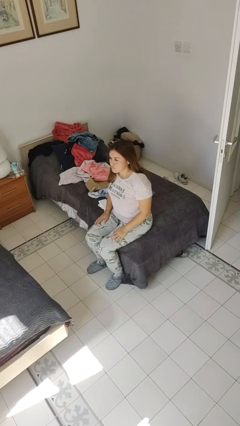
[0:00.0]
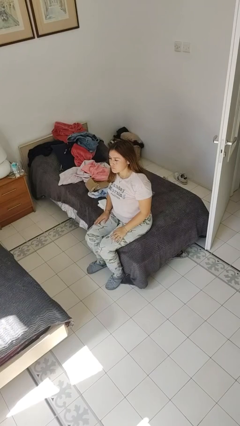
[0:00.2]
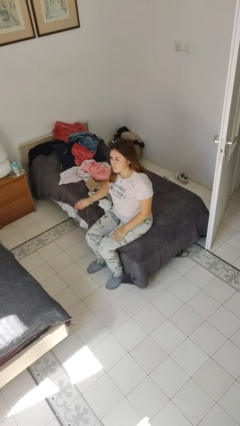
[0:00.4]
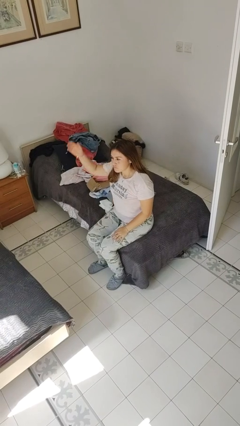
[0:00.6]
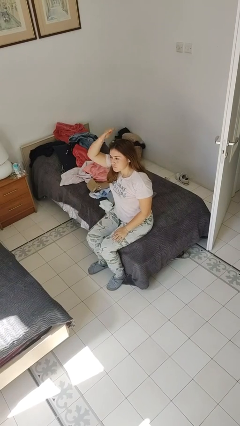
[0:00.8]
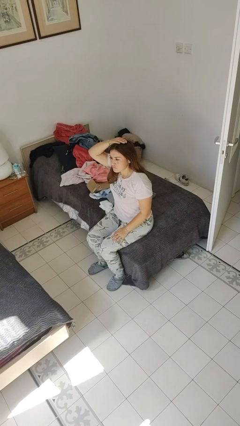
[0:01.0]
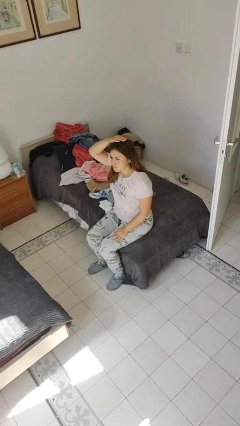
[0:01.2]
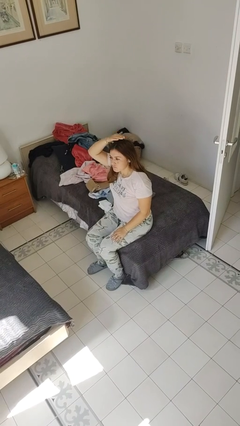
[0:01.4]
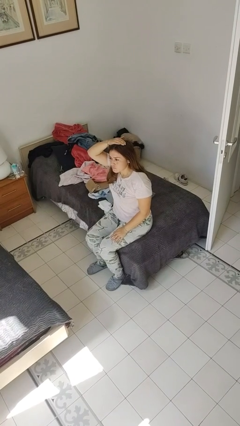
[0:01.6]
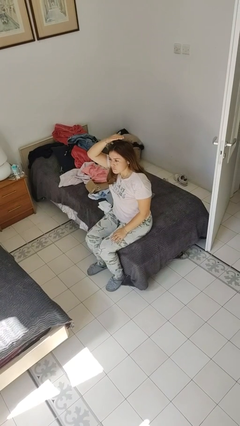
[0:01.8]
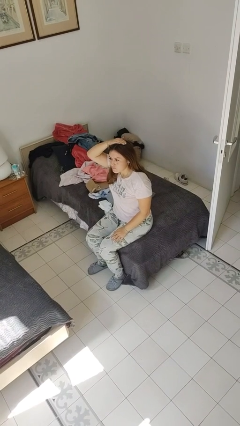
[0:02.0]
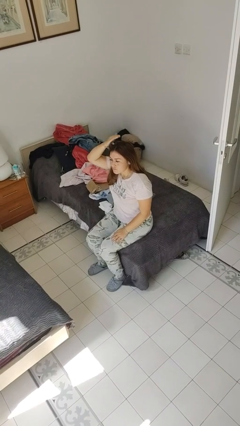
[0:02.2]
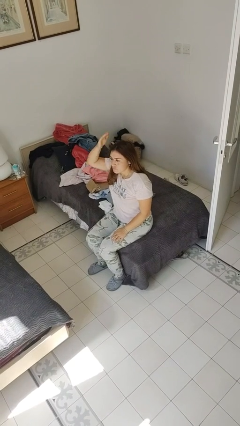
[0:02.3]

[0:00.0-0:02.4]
person pats head

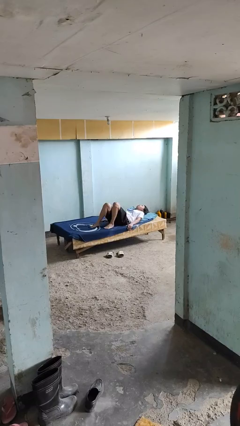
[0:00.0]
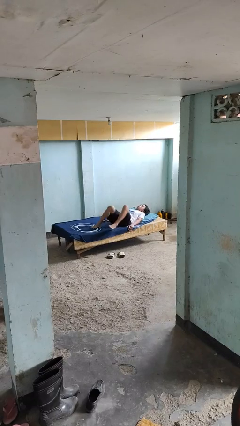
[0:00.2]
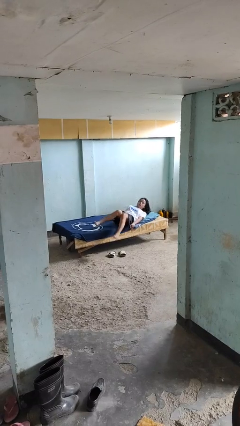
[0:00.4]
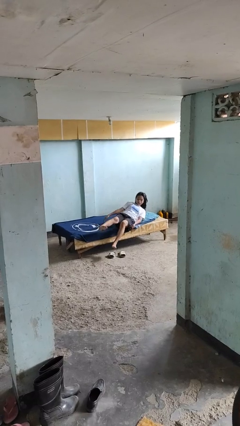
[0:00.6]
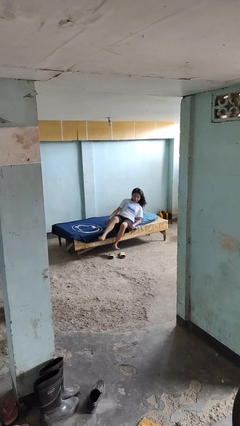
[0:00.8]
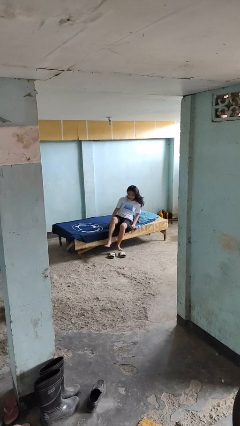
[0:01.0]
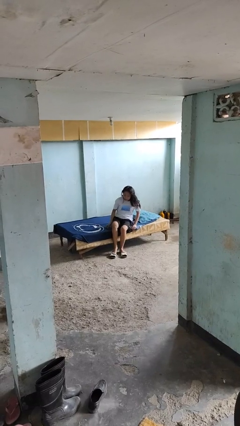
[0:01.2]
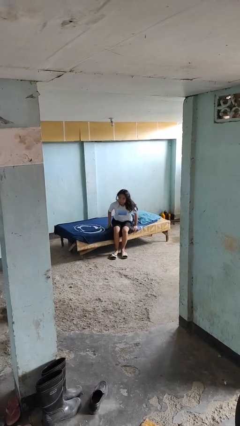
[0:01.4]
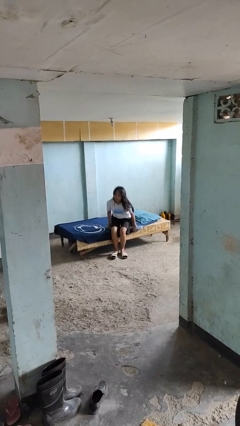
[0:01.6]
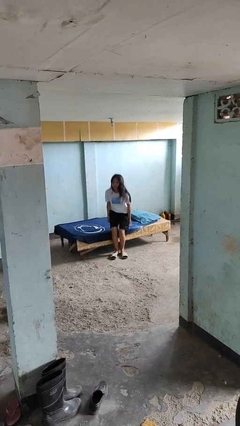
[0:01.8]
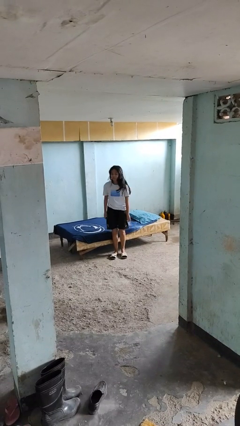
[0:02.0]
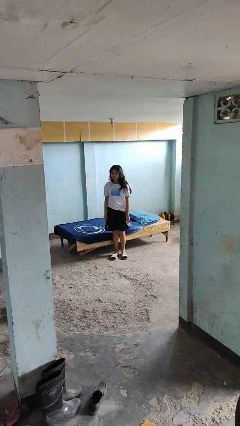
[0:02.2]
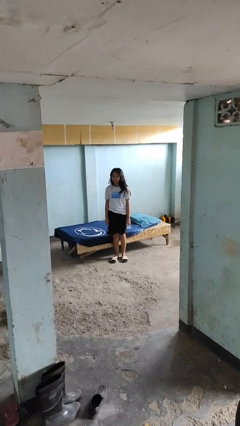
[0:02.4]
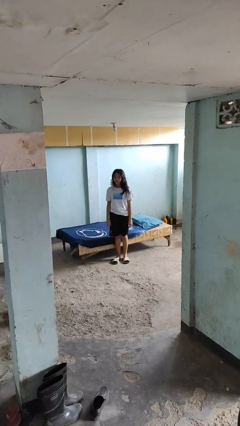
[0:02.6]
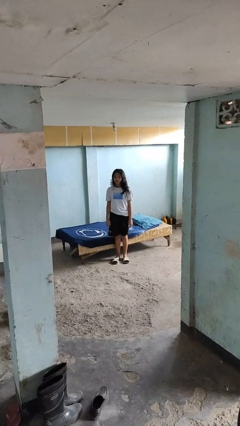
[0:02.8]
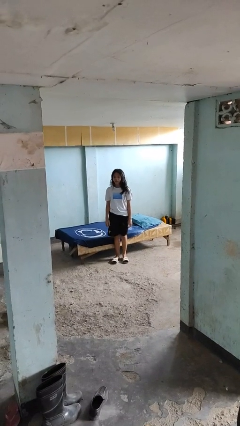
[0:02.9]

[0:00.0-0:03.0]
person stands up

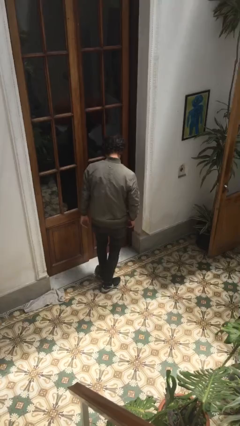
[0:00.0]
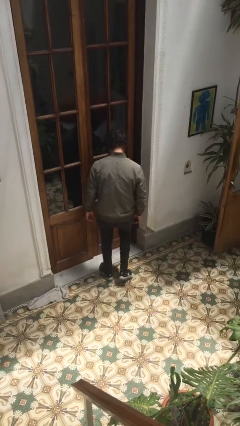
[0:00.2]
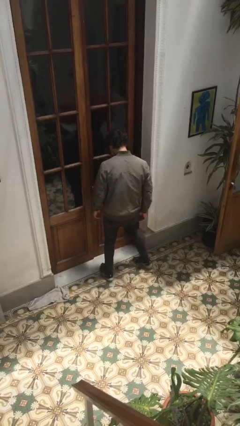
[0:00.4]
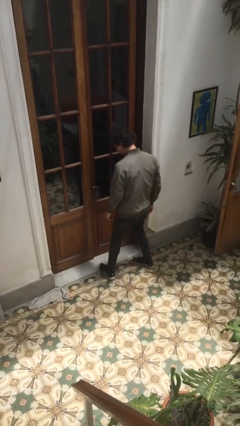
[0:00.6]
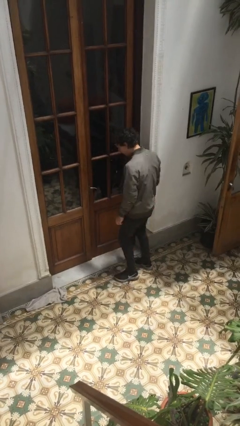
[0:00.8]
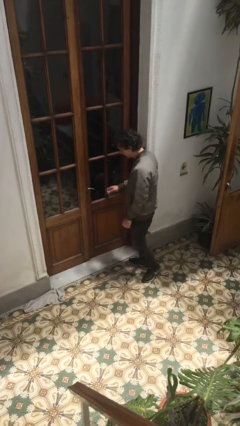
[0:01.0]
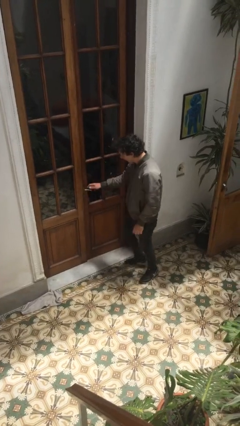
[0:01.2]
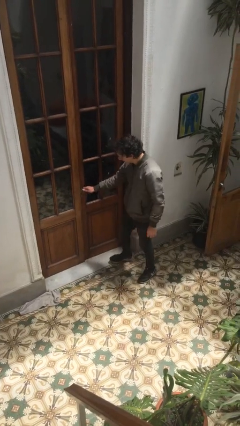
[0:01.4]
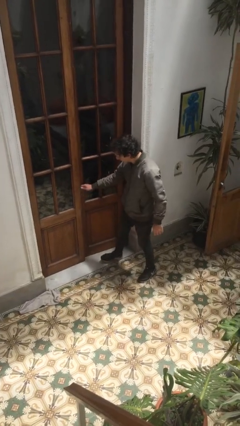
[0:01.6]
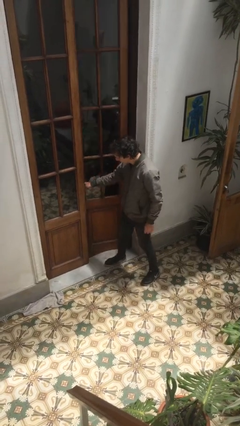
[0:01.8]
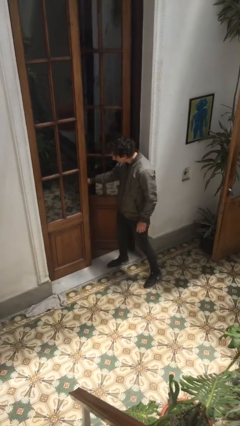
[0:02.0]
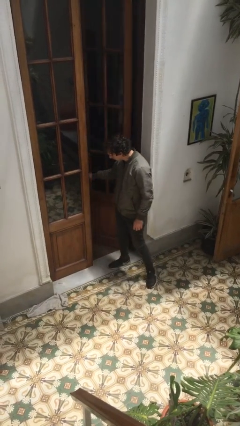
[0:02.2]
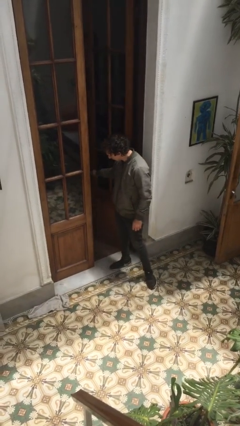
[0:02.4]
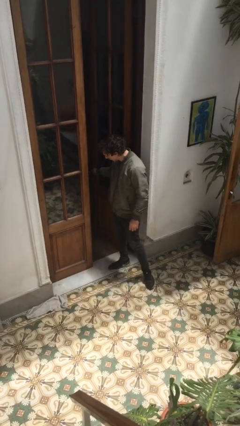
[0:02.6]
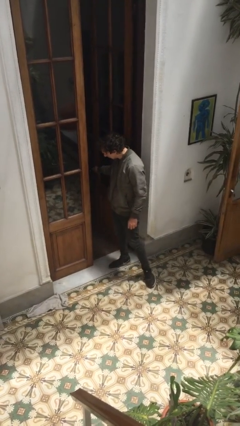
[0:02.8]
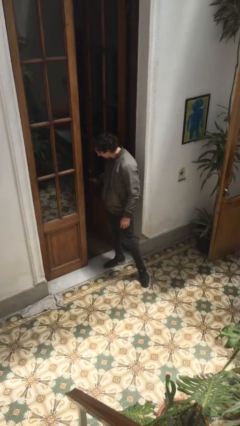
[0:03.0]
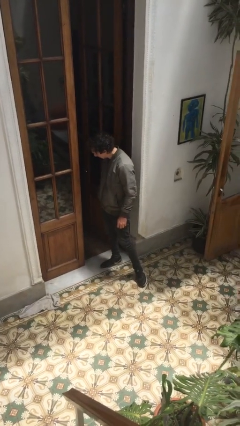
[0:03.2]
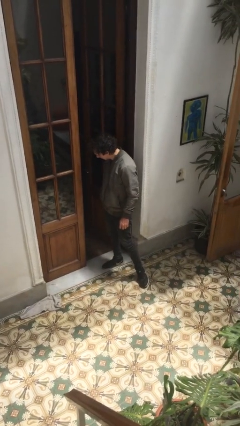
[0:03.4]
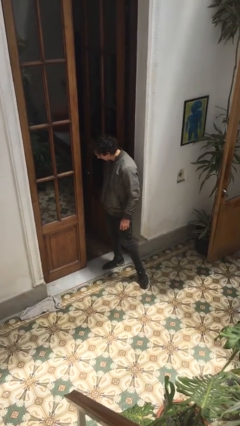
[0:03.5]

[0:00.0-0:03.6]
person opens facility door

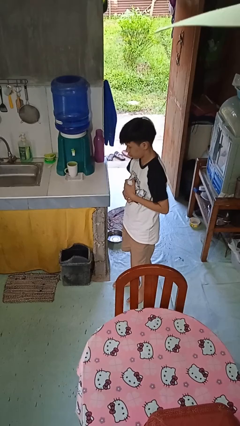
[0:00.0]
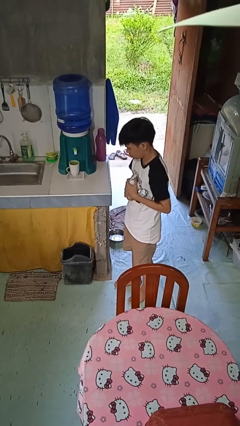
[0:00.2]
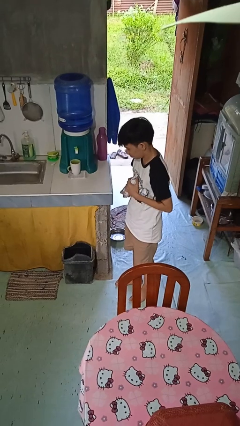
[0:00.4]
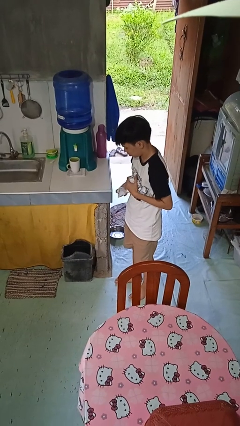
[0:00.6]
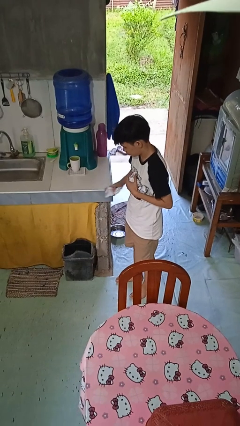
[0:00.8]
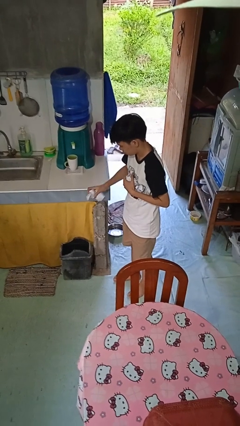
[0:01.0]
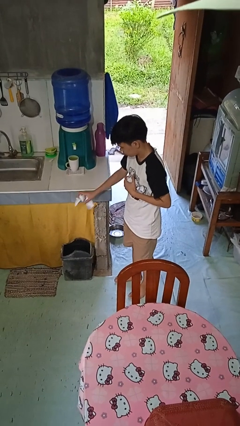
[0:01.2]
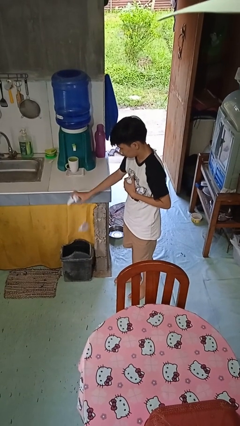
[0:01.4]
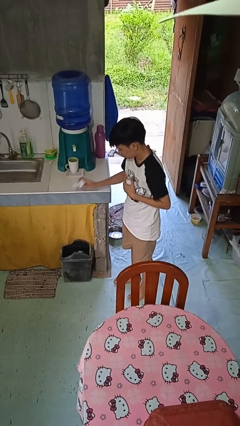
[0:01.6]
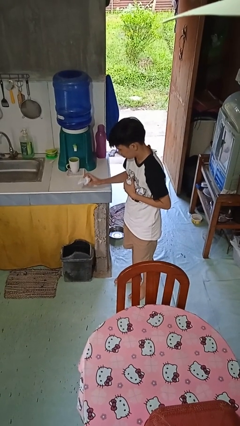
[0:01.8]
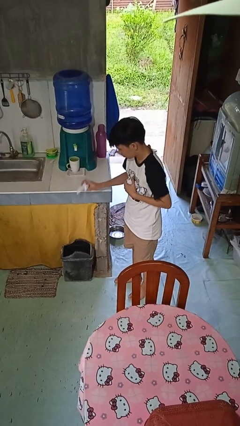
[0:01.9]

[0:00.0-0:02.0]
person discards trash

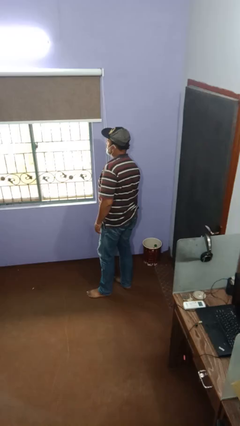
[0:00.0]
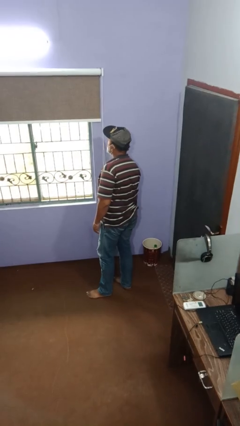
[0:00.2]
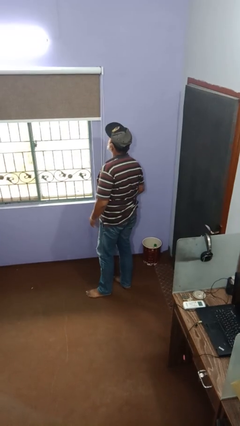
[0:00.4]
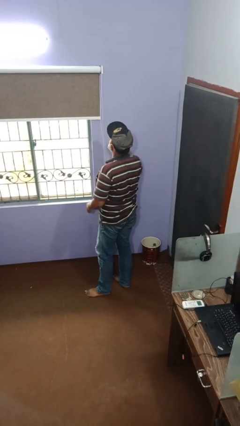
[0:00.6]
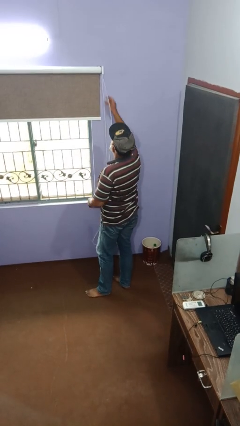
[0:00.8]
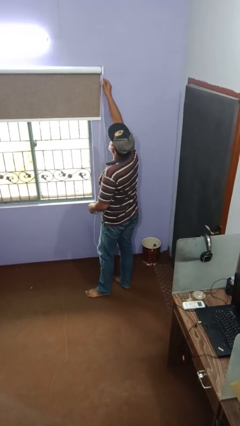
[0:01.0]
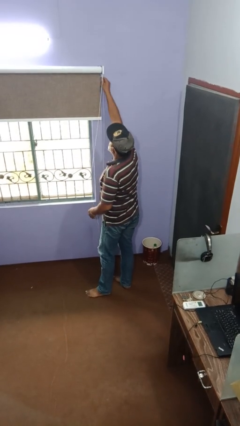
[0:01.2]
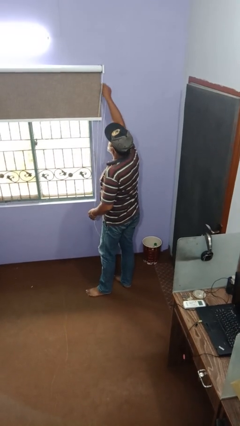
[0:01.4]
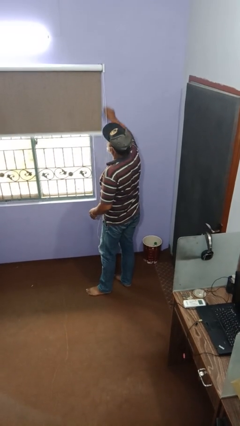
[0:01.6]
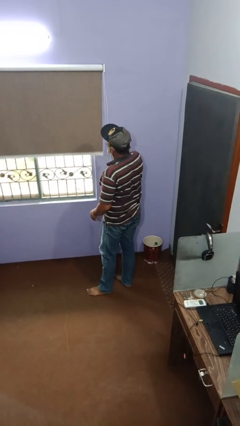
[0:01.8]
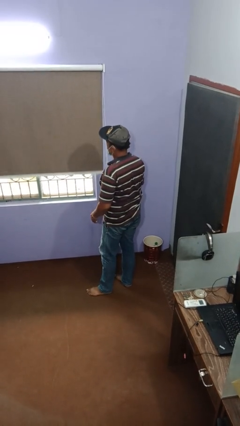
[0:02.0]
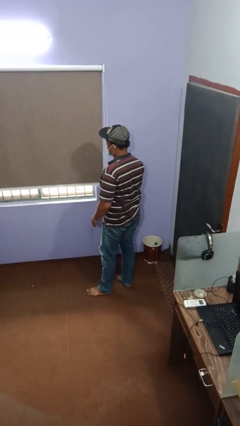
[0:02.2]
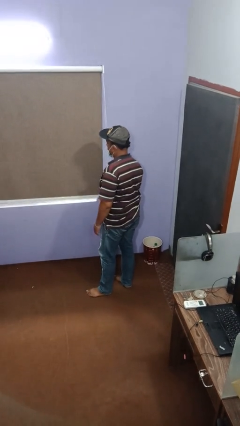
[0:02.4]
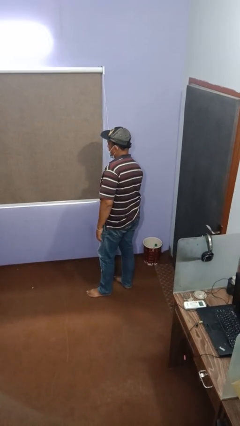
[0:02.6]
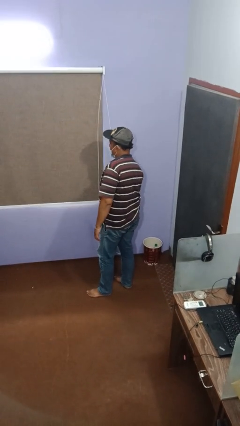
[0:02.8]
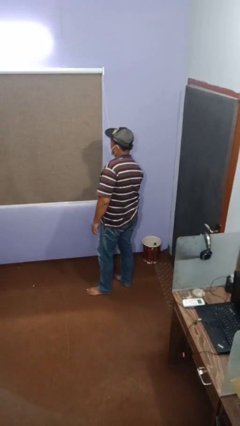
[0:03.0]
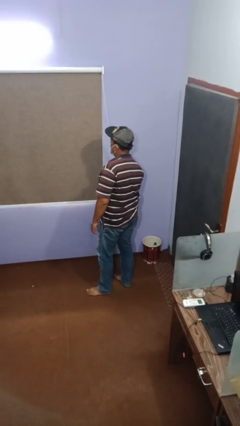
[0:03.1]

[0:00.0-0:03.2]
person closes curtains

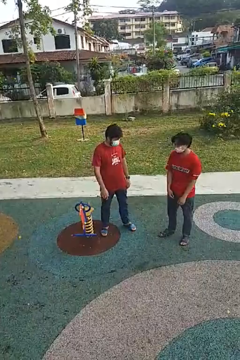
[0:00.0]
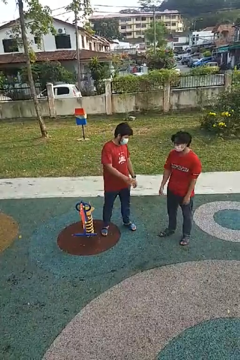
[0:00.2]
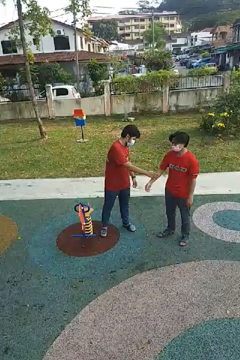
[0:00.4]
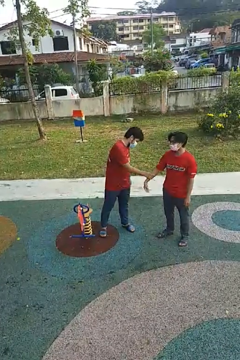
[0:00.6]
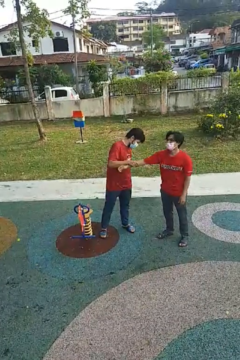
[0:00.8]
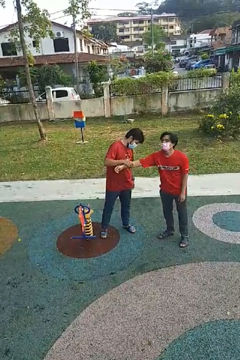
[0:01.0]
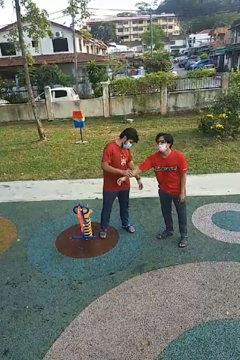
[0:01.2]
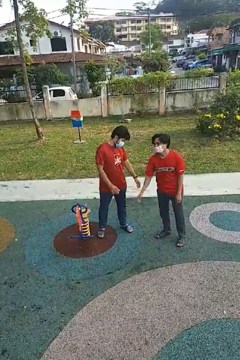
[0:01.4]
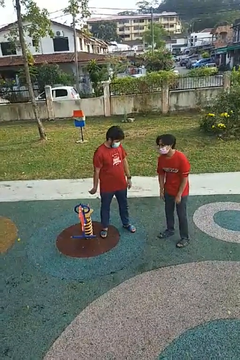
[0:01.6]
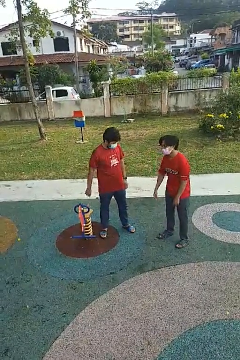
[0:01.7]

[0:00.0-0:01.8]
person grabs person by forearm

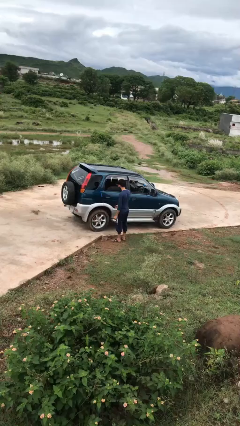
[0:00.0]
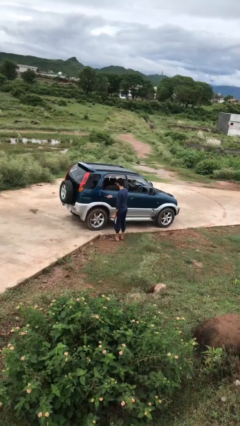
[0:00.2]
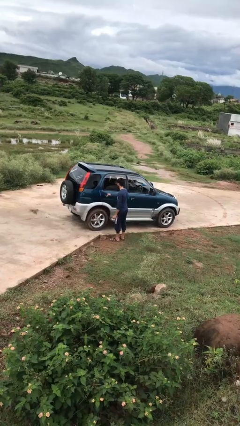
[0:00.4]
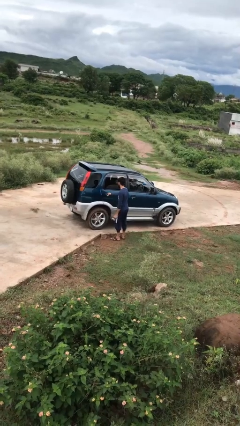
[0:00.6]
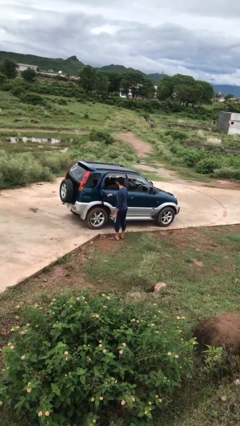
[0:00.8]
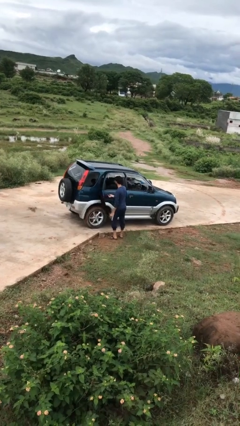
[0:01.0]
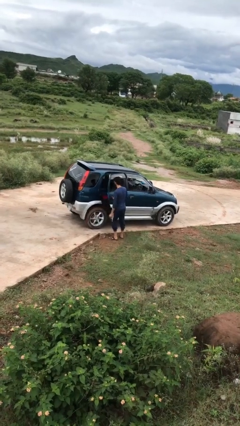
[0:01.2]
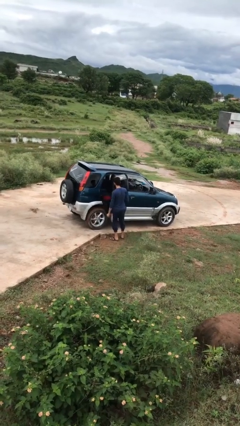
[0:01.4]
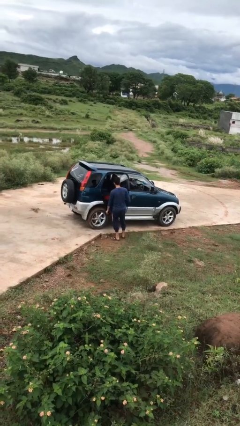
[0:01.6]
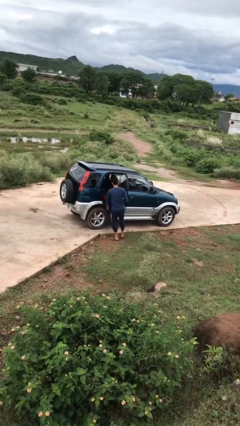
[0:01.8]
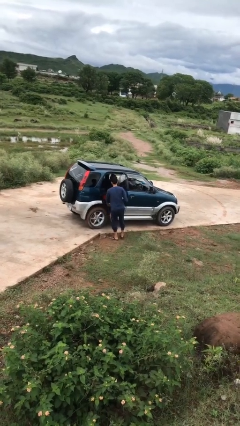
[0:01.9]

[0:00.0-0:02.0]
person opens car door
